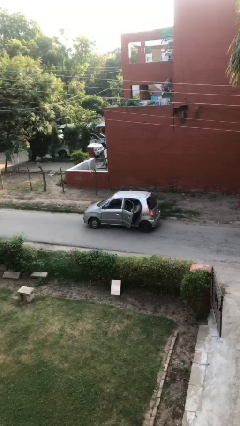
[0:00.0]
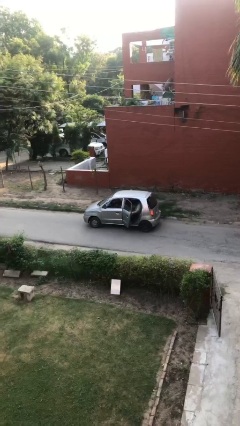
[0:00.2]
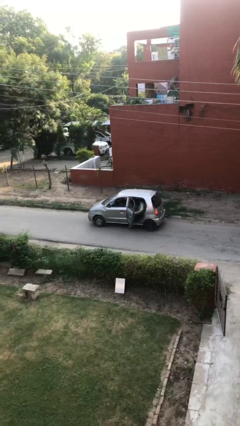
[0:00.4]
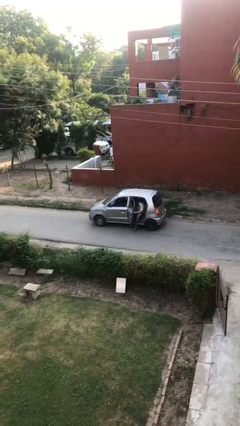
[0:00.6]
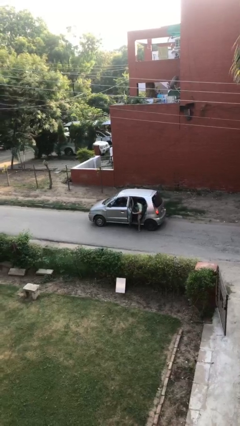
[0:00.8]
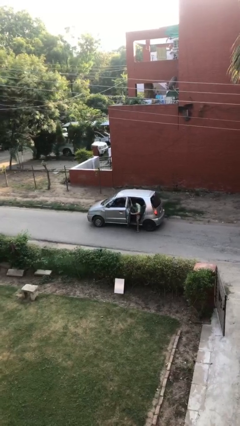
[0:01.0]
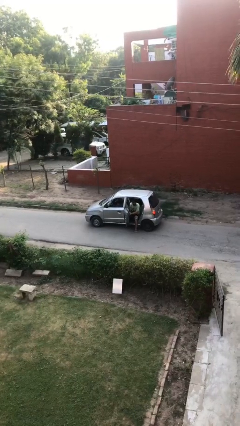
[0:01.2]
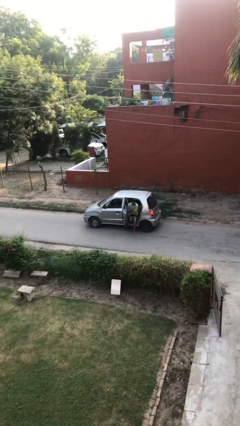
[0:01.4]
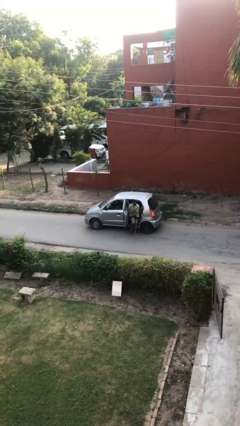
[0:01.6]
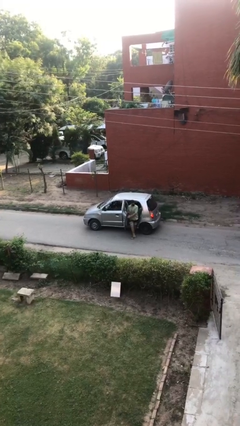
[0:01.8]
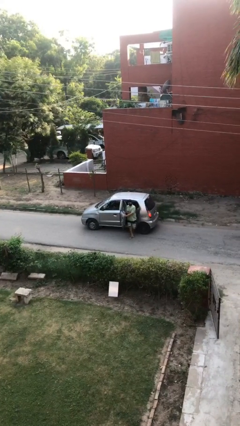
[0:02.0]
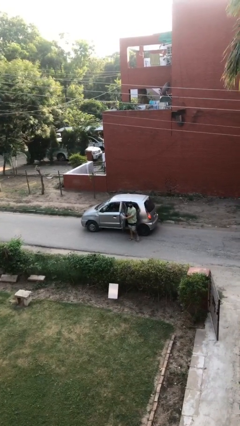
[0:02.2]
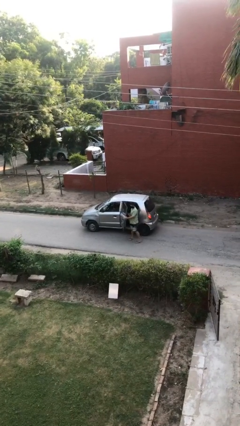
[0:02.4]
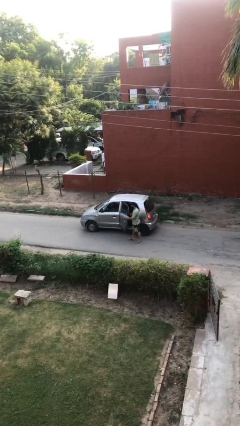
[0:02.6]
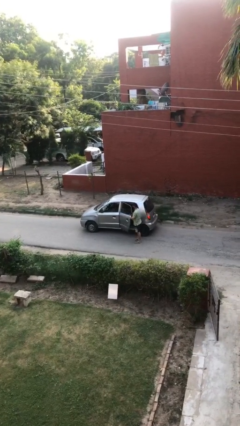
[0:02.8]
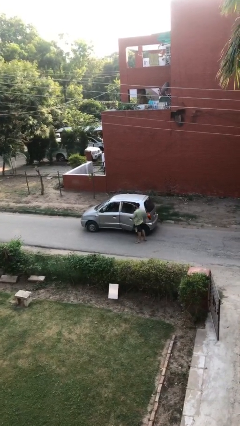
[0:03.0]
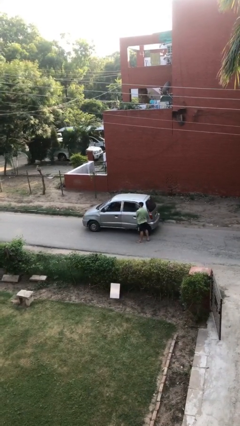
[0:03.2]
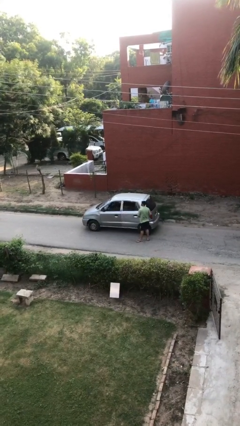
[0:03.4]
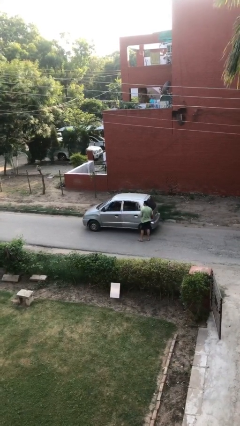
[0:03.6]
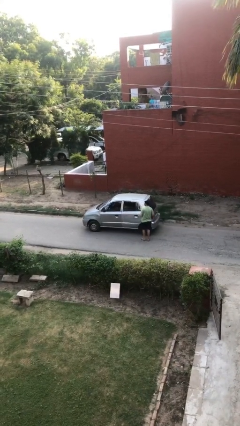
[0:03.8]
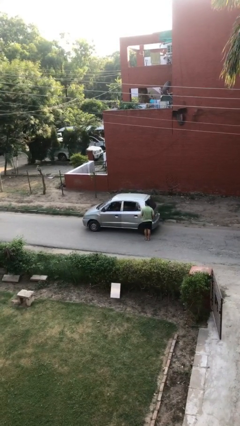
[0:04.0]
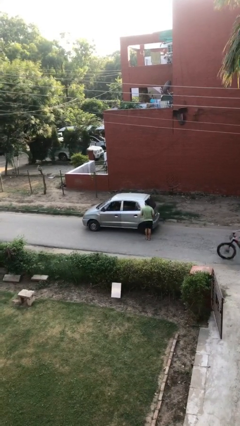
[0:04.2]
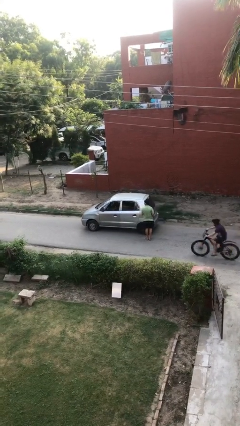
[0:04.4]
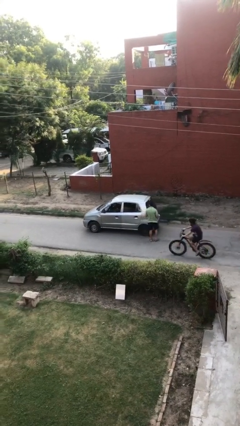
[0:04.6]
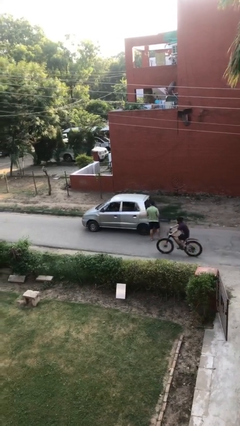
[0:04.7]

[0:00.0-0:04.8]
car drops off person

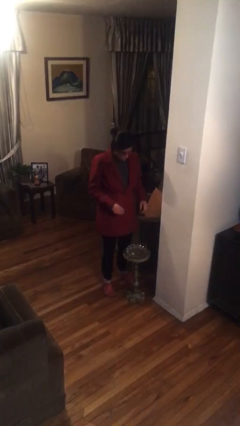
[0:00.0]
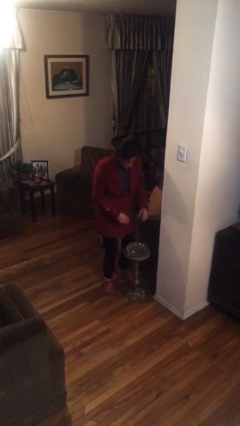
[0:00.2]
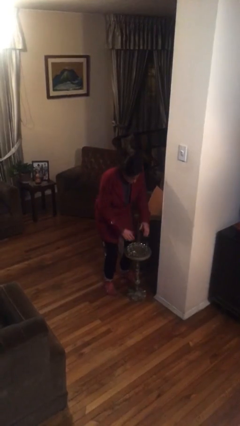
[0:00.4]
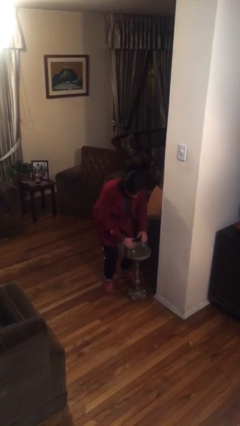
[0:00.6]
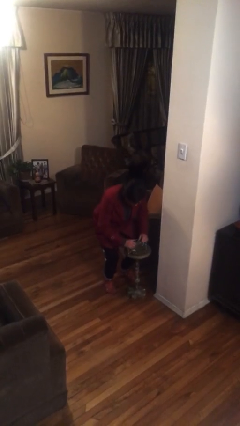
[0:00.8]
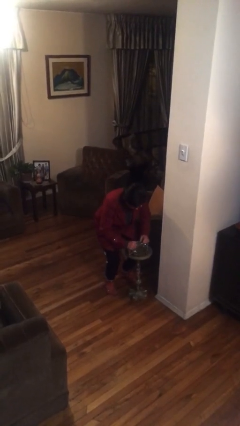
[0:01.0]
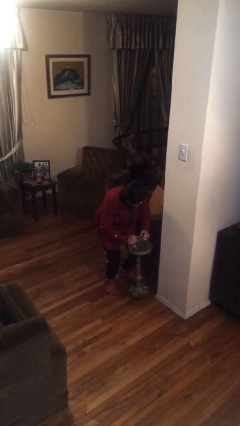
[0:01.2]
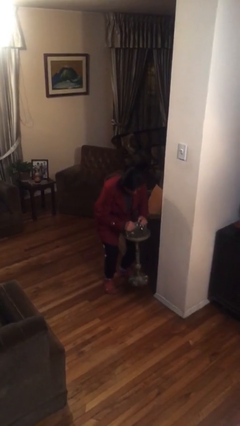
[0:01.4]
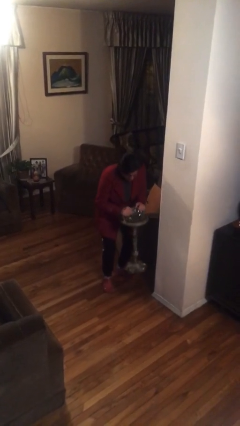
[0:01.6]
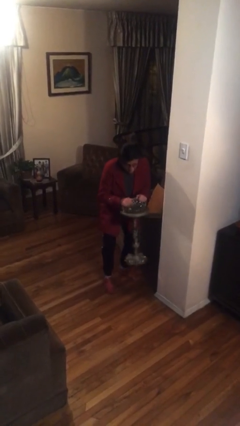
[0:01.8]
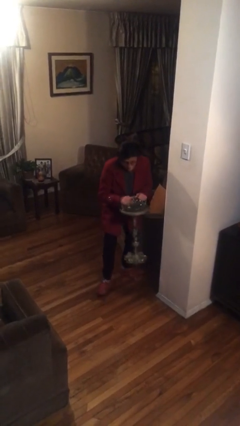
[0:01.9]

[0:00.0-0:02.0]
person picks up object from floor

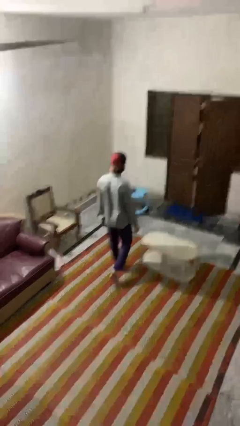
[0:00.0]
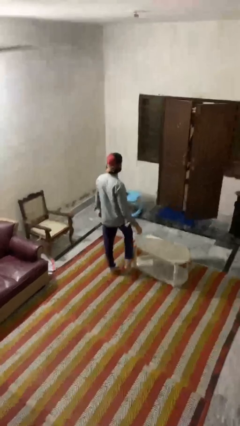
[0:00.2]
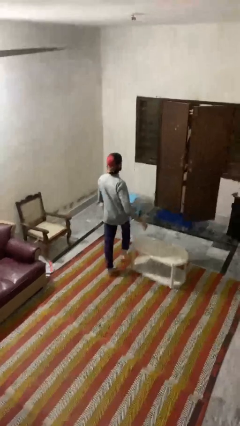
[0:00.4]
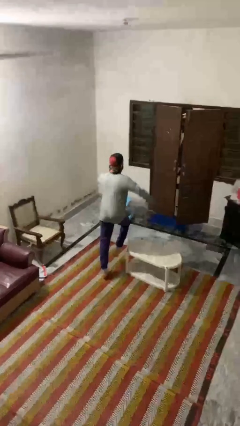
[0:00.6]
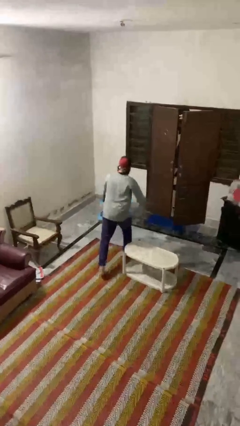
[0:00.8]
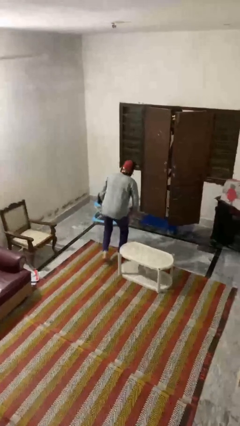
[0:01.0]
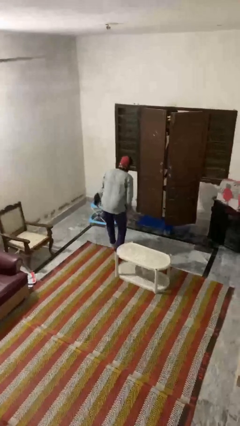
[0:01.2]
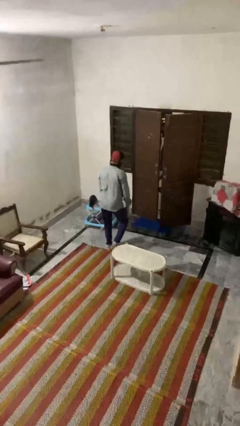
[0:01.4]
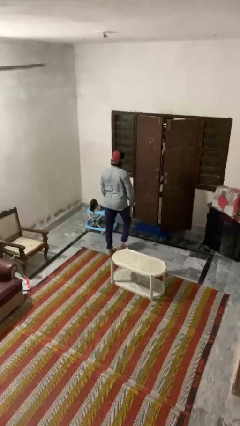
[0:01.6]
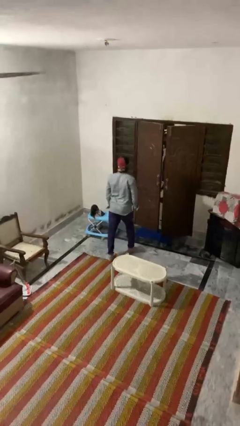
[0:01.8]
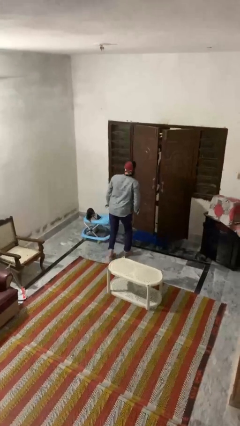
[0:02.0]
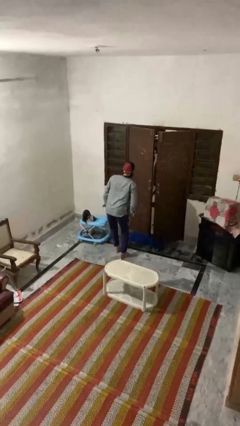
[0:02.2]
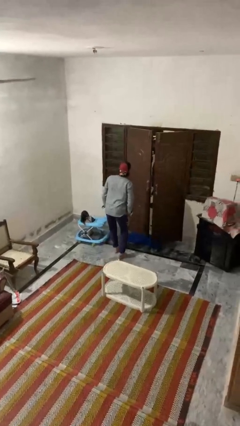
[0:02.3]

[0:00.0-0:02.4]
person bumps into table

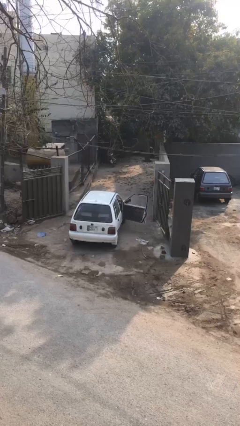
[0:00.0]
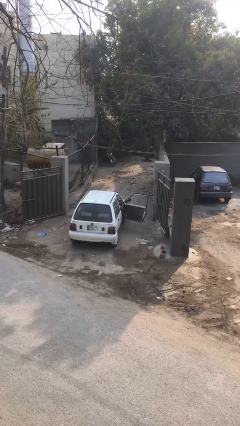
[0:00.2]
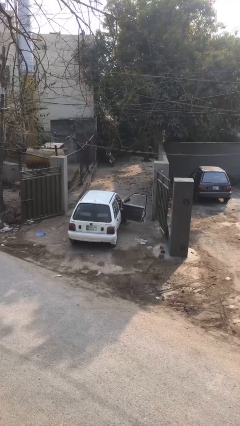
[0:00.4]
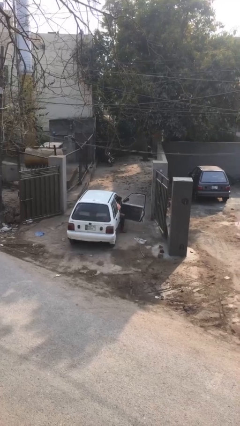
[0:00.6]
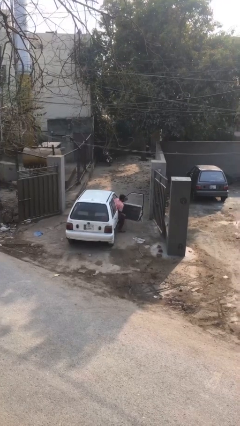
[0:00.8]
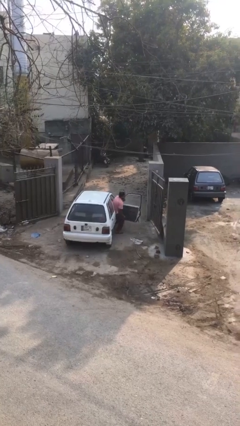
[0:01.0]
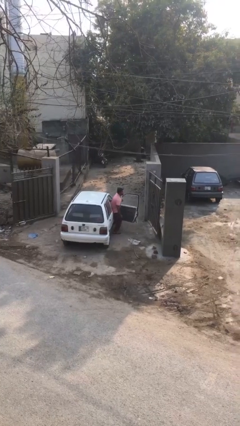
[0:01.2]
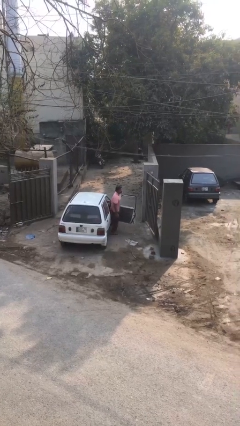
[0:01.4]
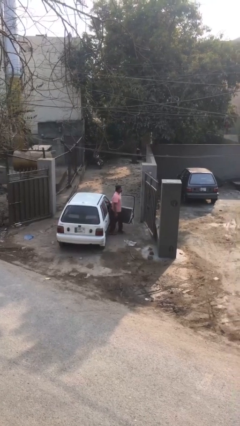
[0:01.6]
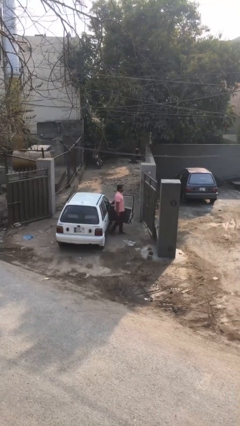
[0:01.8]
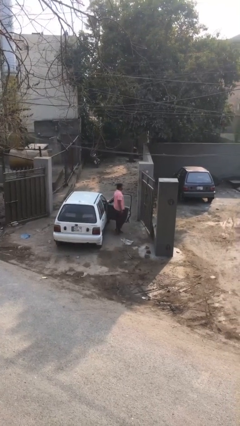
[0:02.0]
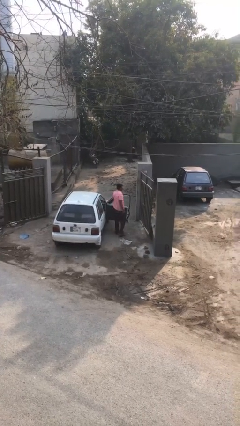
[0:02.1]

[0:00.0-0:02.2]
person exits car

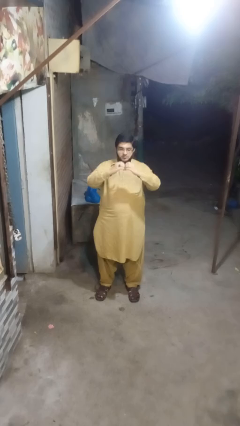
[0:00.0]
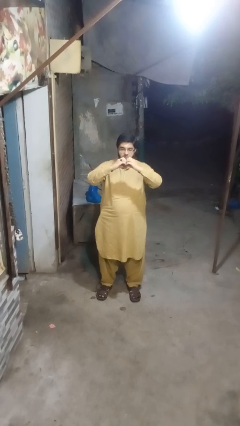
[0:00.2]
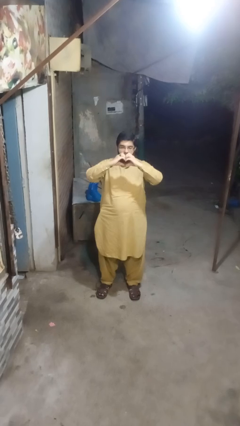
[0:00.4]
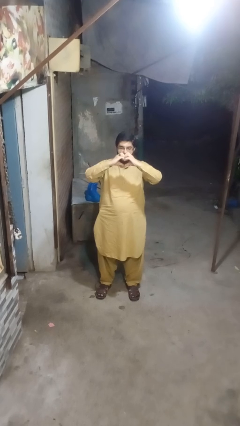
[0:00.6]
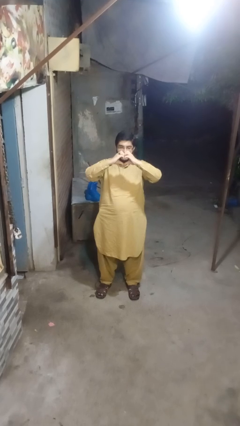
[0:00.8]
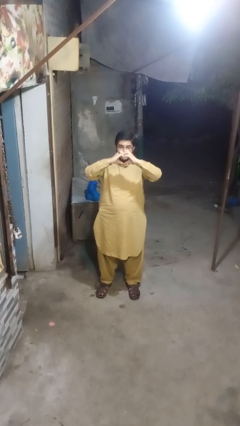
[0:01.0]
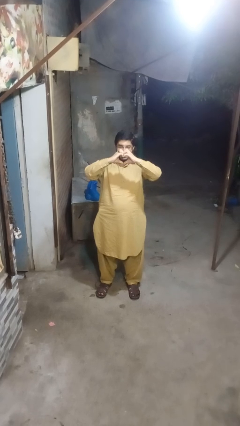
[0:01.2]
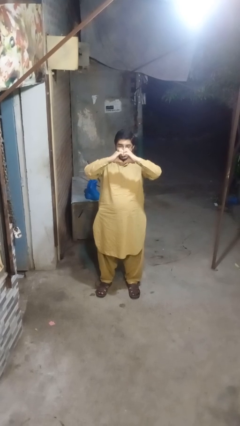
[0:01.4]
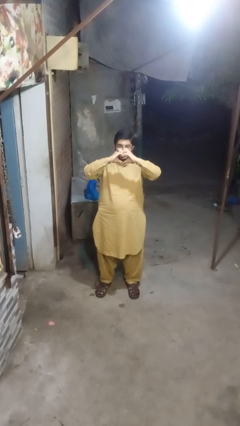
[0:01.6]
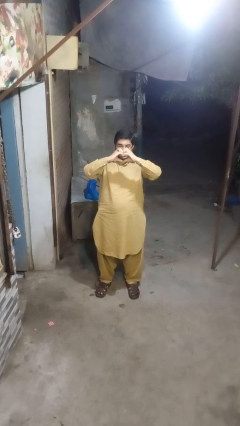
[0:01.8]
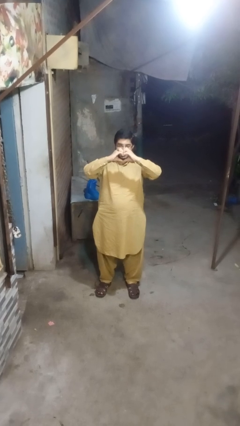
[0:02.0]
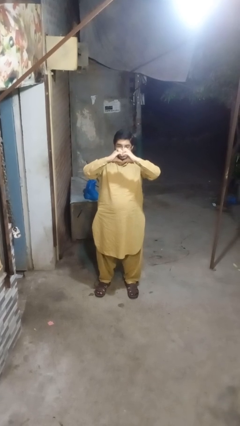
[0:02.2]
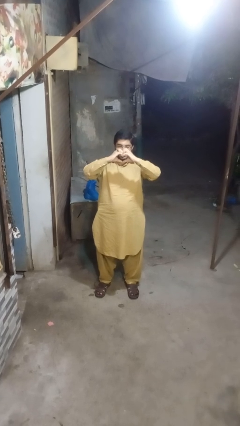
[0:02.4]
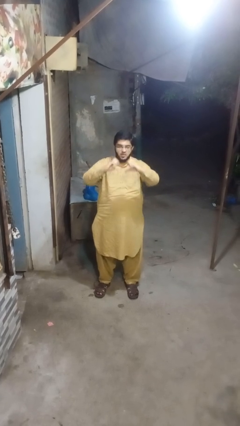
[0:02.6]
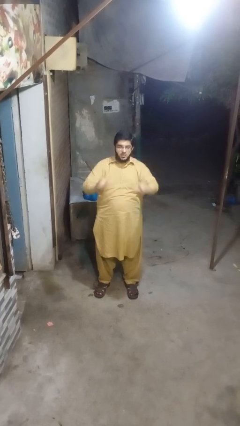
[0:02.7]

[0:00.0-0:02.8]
person gestures heart

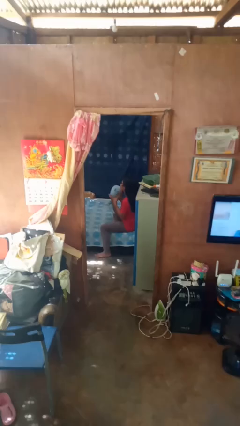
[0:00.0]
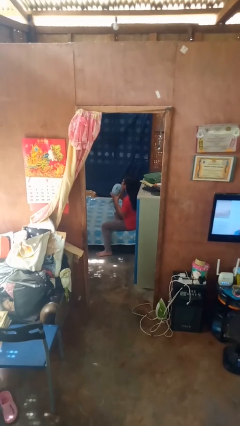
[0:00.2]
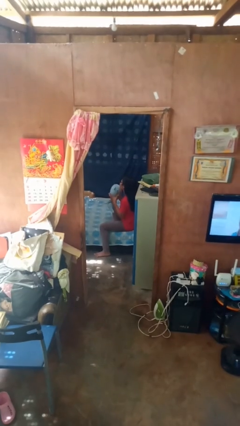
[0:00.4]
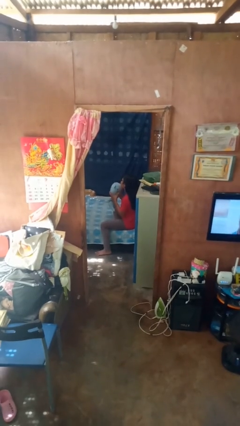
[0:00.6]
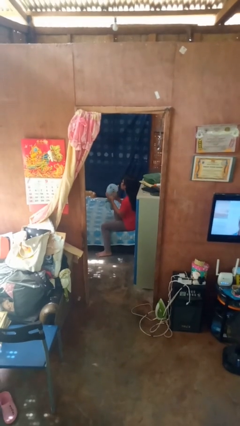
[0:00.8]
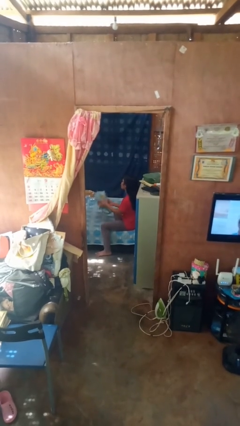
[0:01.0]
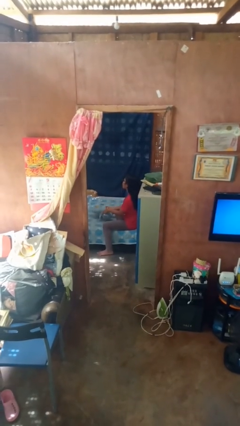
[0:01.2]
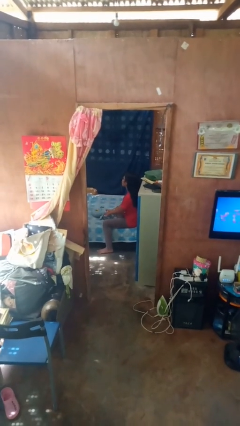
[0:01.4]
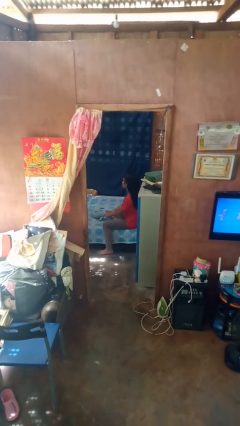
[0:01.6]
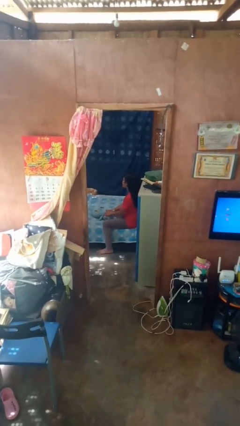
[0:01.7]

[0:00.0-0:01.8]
person puts down object on bed

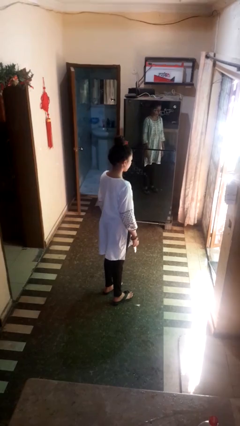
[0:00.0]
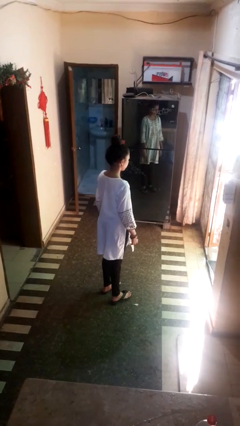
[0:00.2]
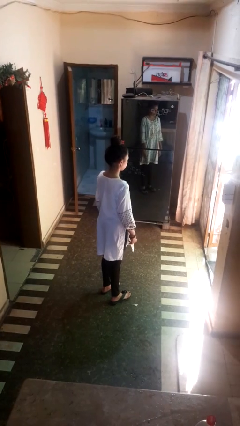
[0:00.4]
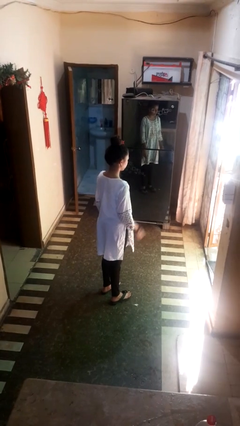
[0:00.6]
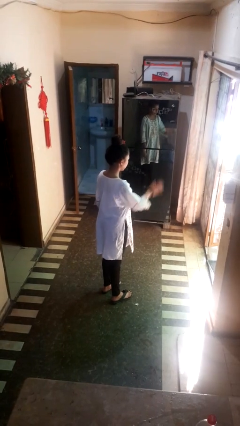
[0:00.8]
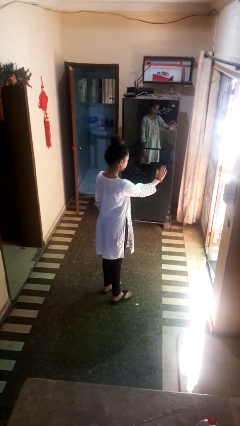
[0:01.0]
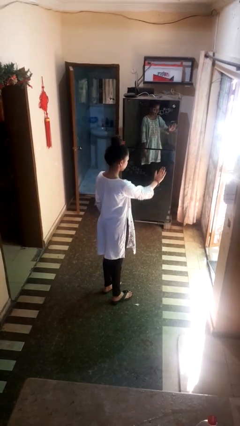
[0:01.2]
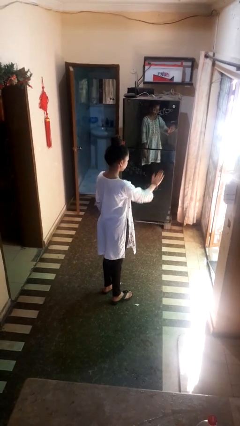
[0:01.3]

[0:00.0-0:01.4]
person gestures stop
